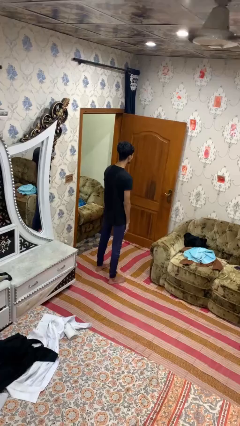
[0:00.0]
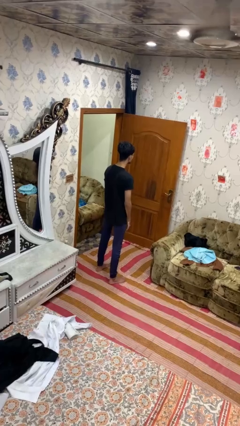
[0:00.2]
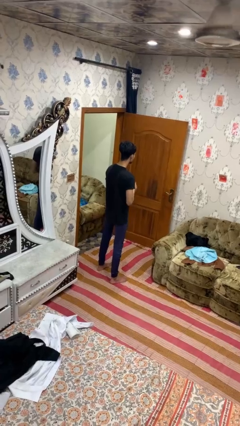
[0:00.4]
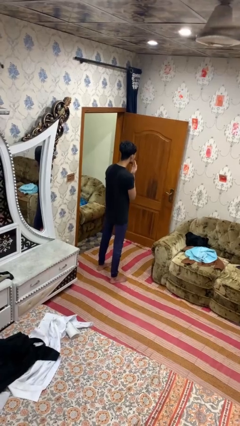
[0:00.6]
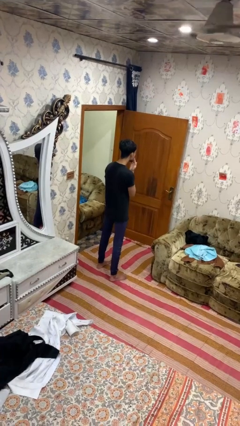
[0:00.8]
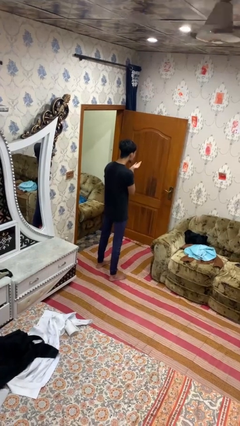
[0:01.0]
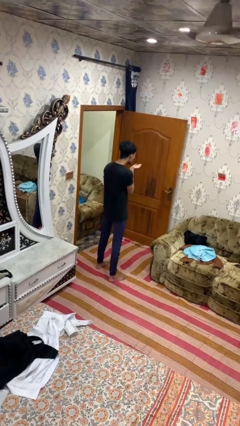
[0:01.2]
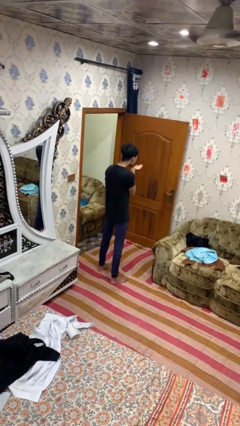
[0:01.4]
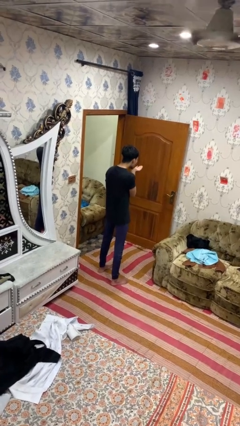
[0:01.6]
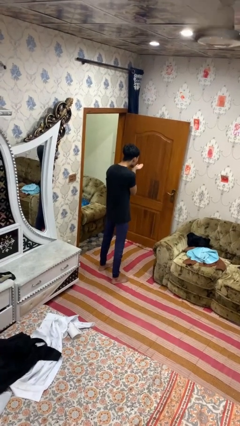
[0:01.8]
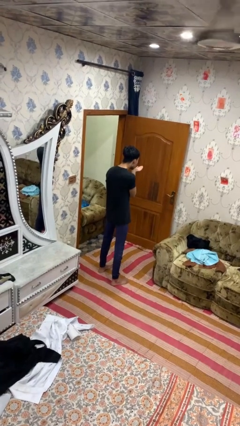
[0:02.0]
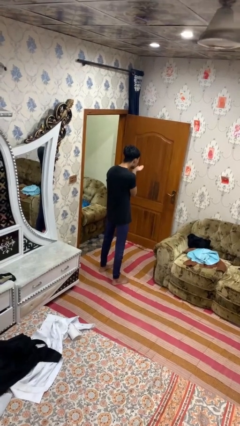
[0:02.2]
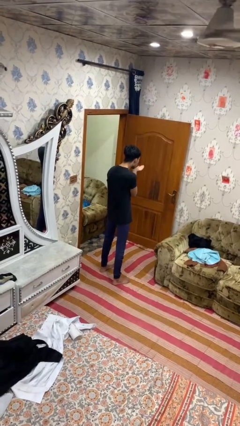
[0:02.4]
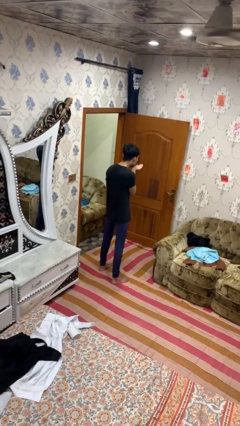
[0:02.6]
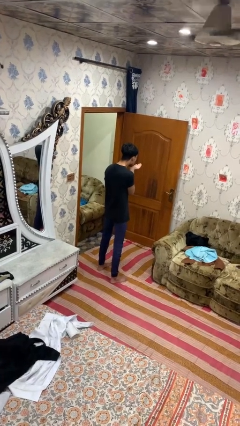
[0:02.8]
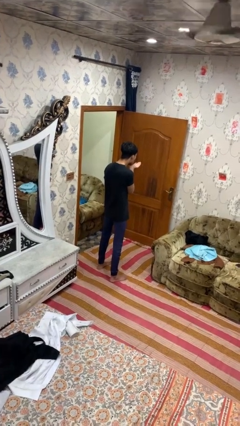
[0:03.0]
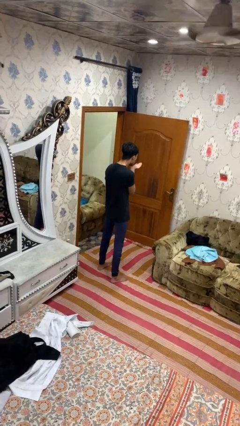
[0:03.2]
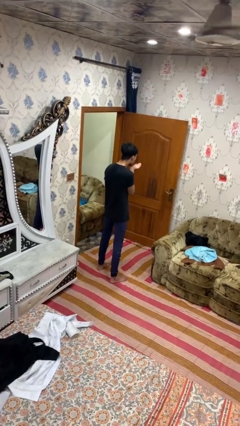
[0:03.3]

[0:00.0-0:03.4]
person gestures blow kiss

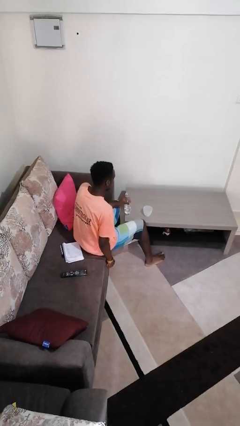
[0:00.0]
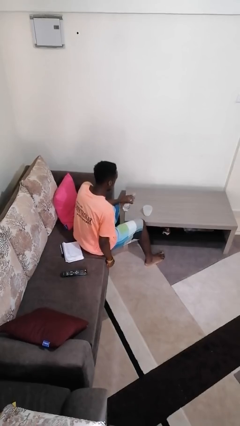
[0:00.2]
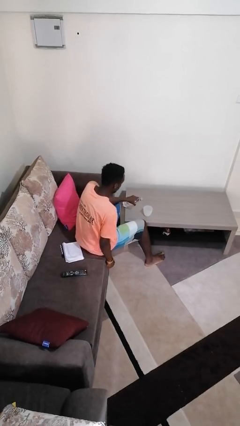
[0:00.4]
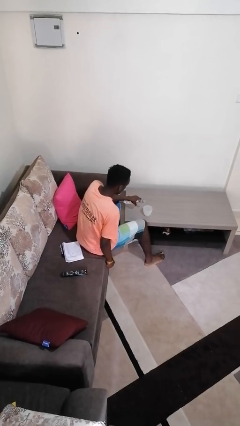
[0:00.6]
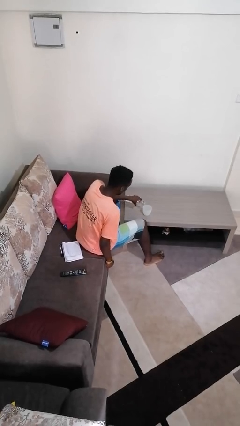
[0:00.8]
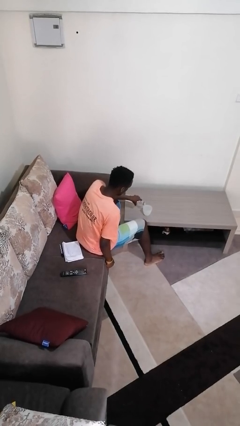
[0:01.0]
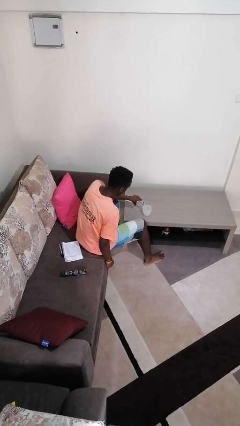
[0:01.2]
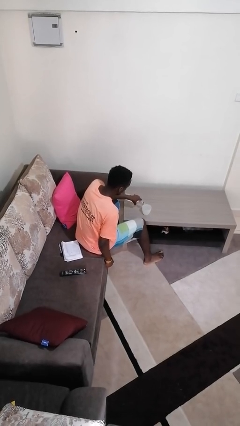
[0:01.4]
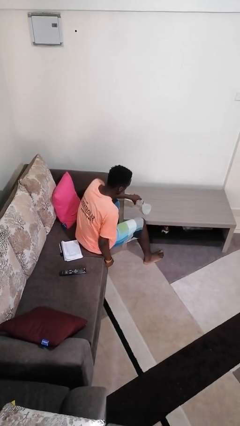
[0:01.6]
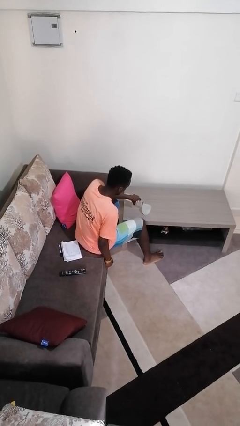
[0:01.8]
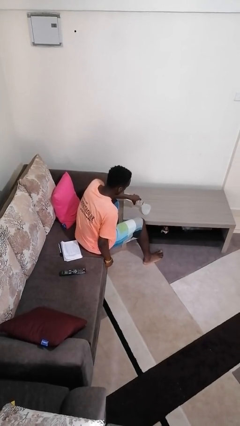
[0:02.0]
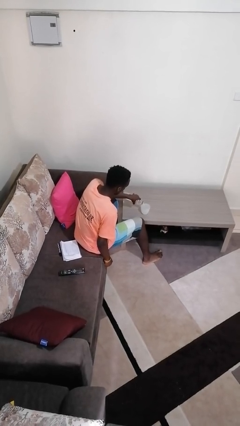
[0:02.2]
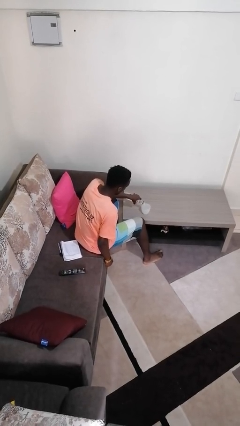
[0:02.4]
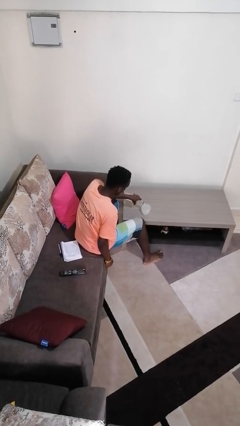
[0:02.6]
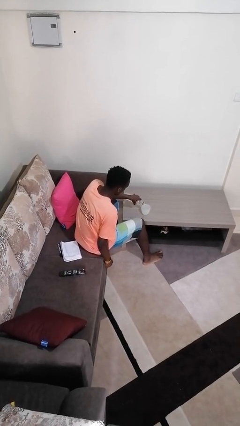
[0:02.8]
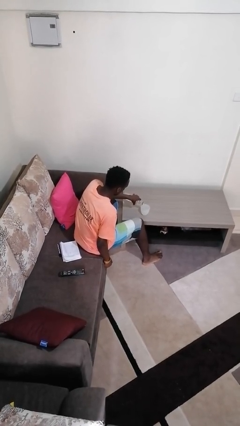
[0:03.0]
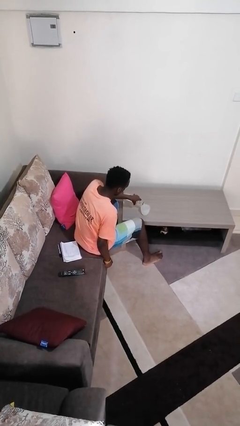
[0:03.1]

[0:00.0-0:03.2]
person pours liquid into cup

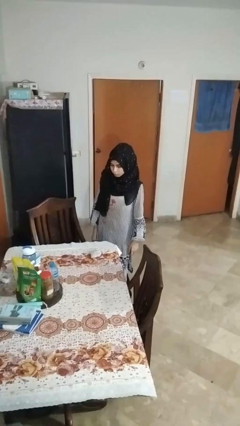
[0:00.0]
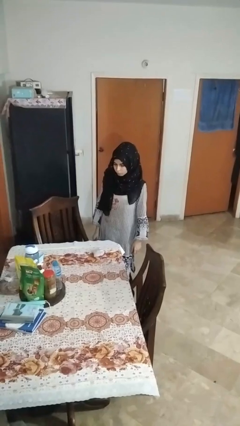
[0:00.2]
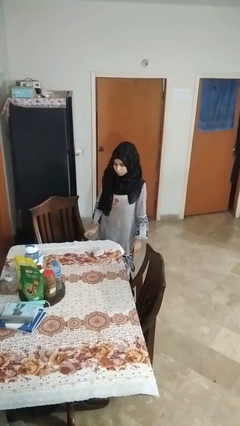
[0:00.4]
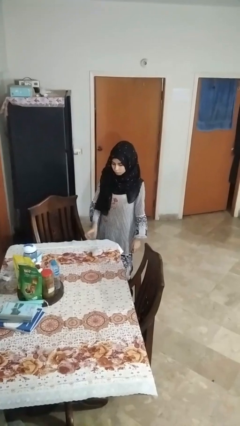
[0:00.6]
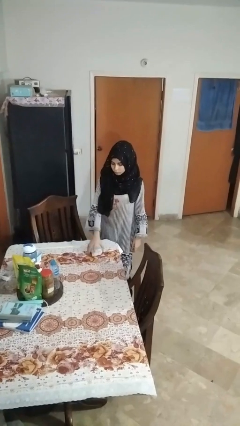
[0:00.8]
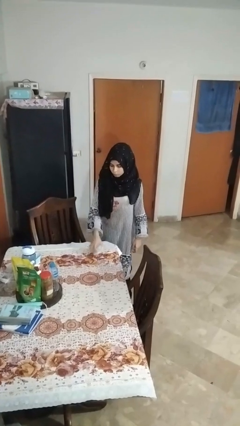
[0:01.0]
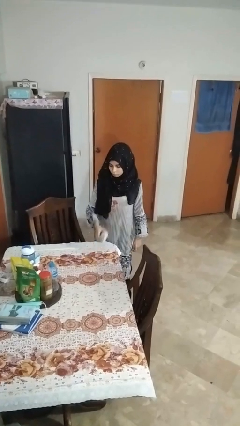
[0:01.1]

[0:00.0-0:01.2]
person picks up object from table

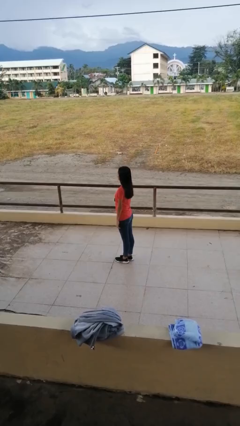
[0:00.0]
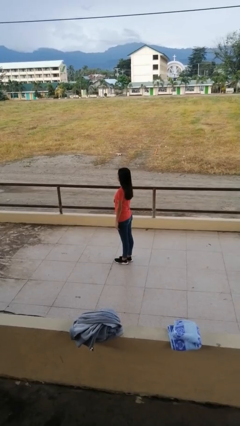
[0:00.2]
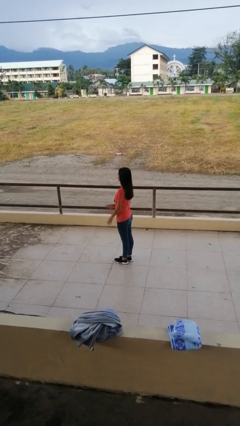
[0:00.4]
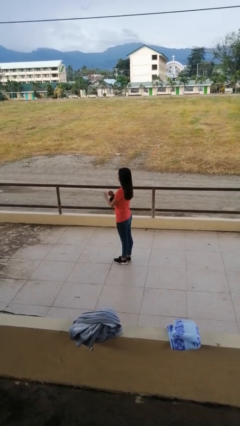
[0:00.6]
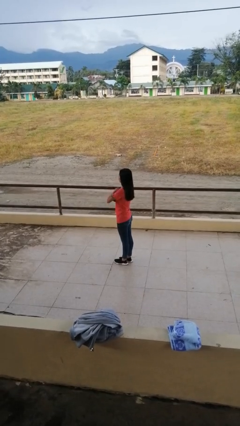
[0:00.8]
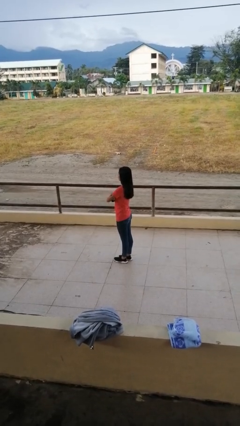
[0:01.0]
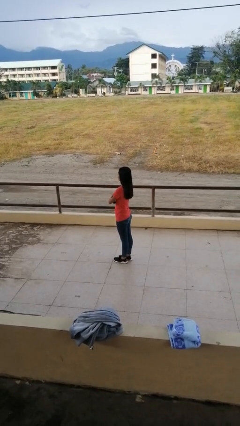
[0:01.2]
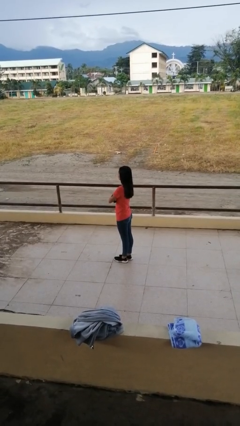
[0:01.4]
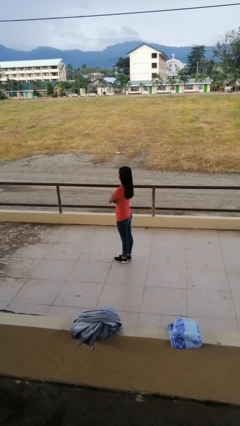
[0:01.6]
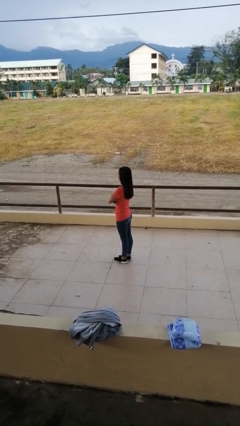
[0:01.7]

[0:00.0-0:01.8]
person crosses arms

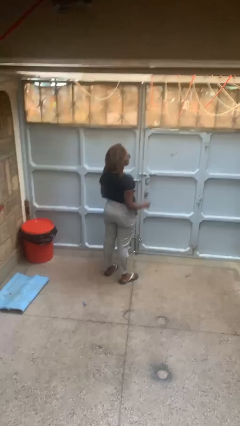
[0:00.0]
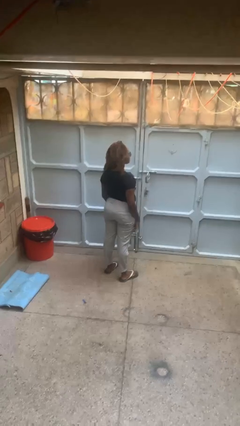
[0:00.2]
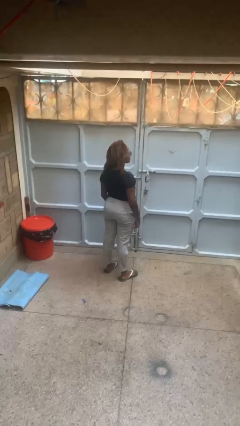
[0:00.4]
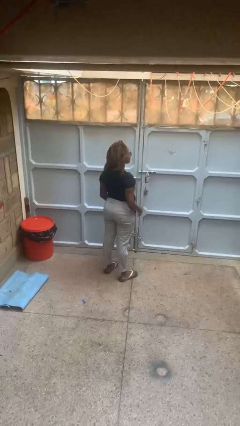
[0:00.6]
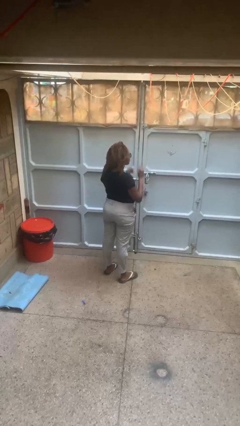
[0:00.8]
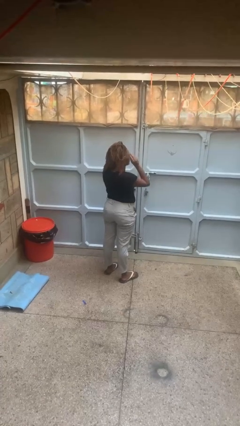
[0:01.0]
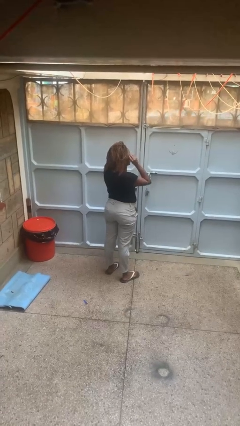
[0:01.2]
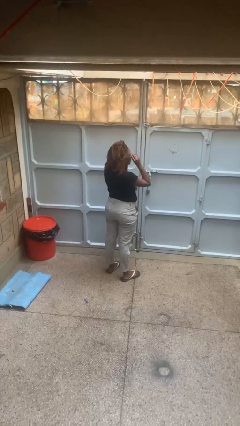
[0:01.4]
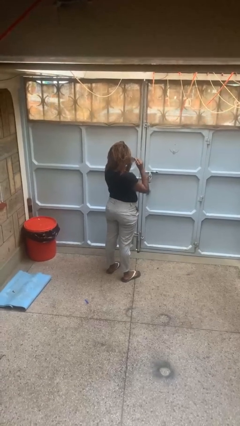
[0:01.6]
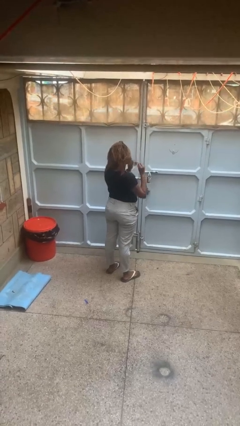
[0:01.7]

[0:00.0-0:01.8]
person takes off glasses

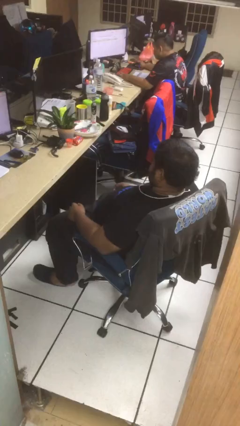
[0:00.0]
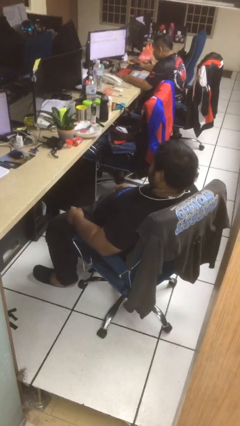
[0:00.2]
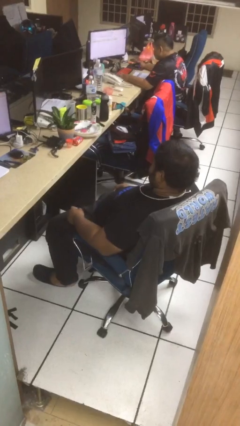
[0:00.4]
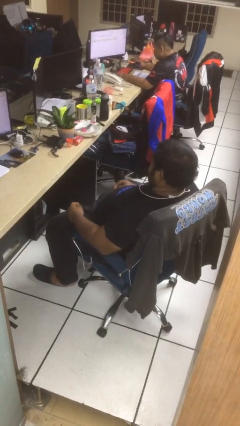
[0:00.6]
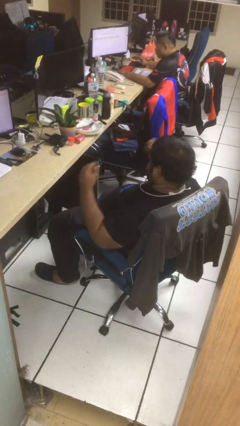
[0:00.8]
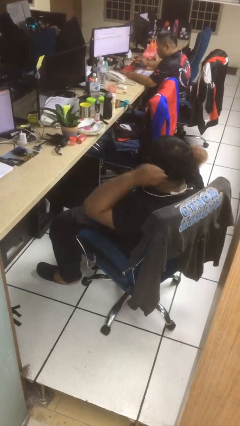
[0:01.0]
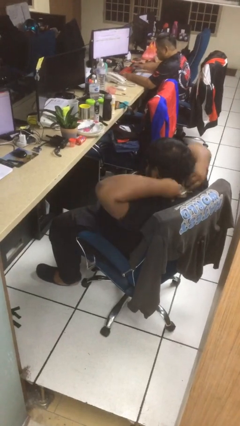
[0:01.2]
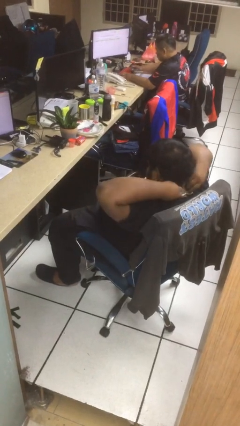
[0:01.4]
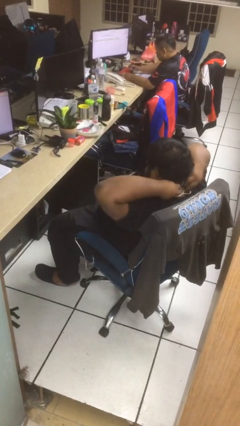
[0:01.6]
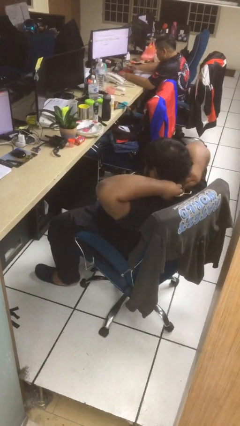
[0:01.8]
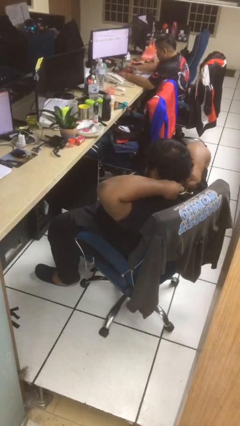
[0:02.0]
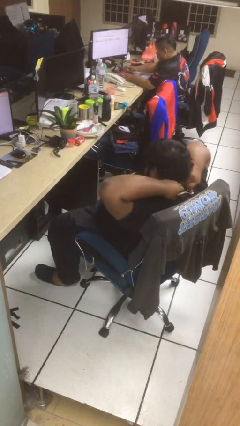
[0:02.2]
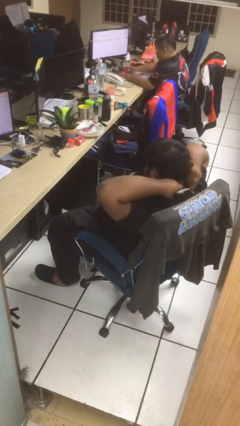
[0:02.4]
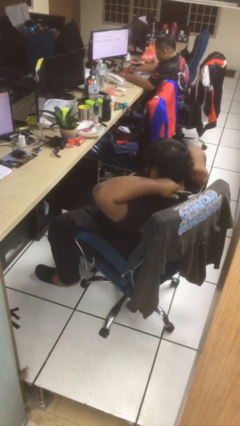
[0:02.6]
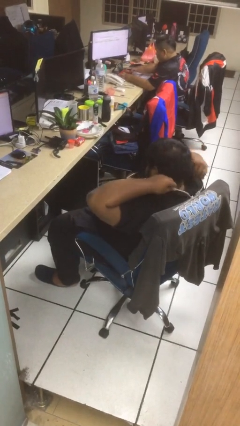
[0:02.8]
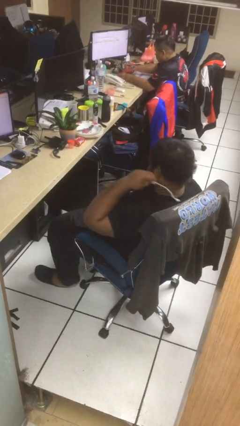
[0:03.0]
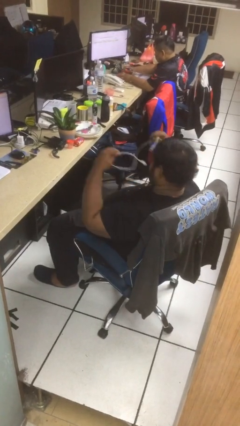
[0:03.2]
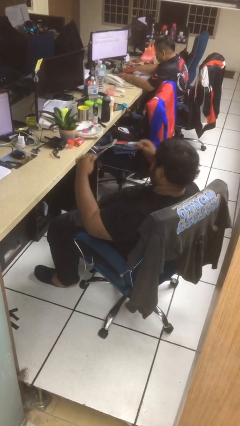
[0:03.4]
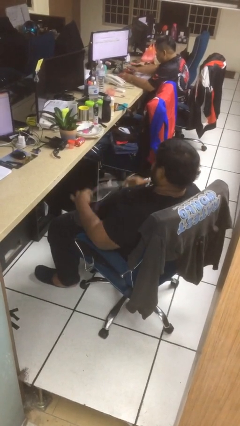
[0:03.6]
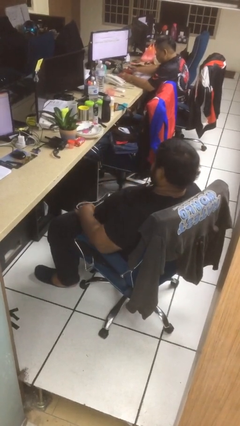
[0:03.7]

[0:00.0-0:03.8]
person takes off necklace

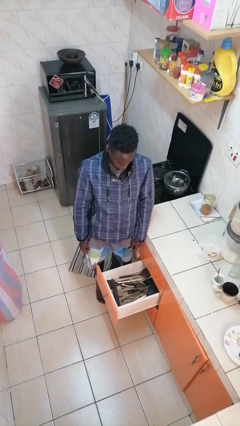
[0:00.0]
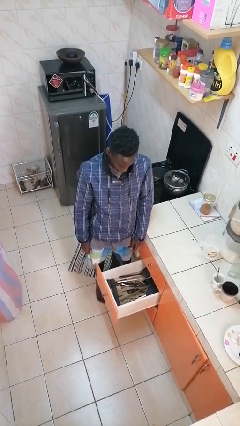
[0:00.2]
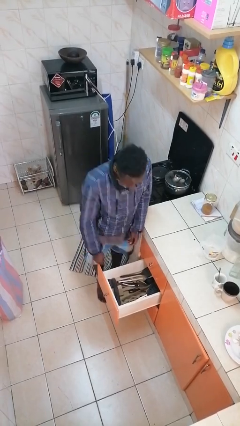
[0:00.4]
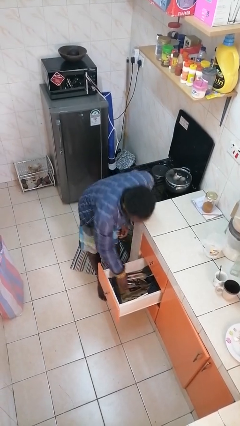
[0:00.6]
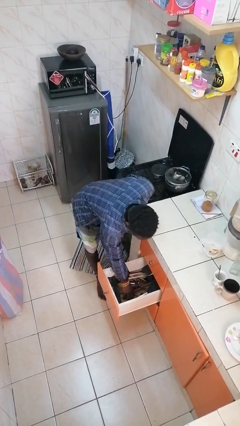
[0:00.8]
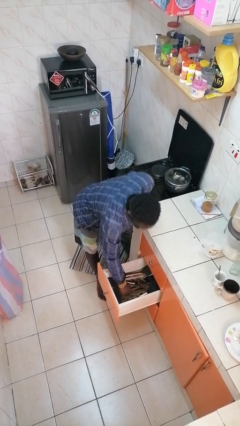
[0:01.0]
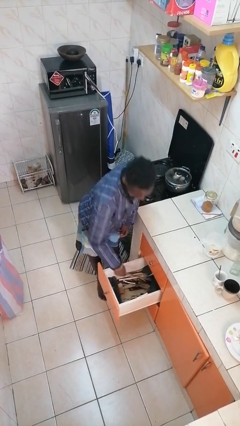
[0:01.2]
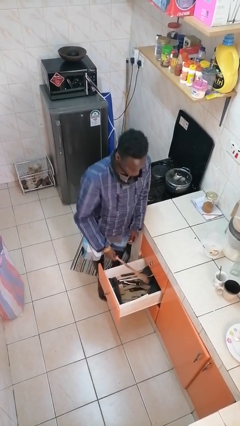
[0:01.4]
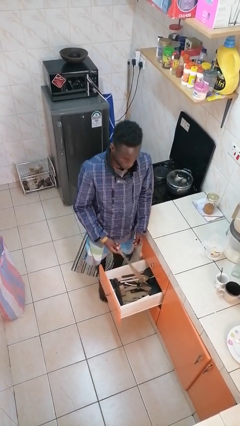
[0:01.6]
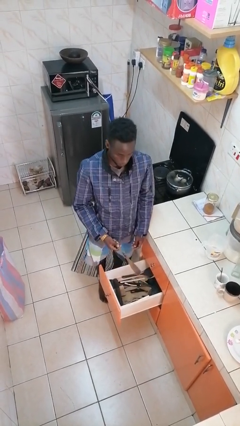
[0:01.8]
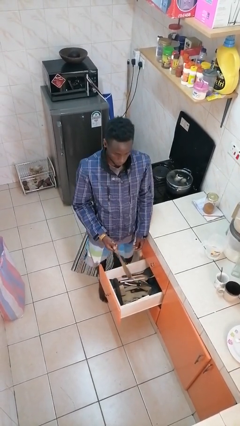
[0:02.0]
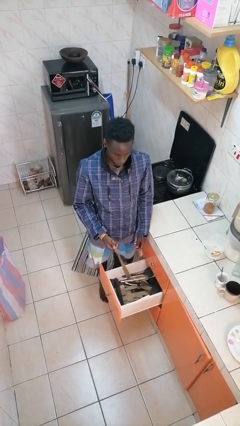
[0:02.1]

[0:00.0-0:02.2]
person takes object from kitchen drawer
